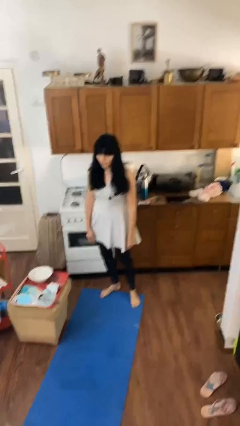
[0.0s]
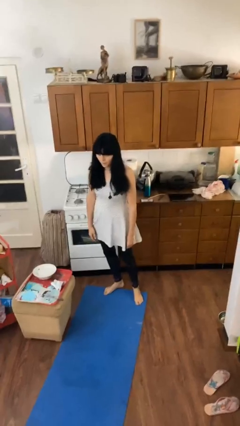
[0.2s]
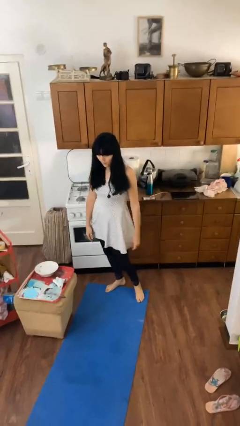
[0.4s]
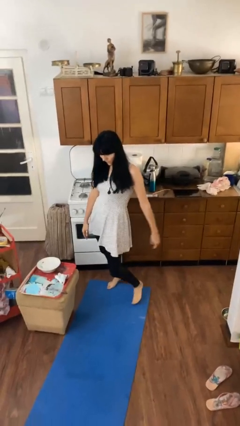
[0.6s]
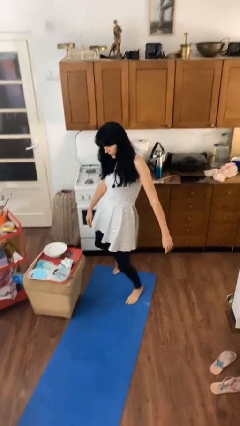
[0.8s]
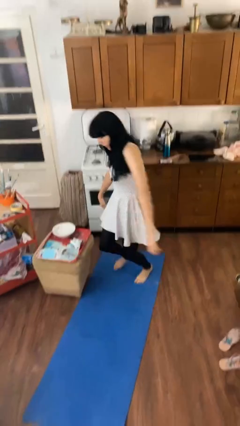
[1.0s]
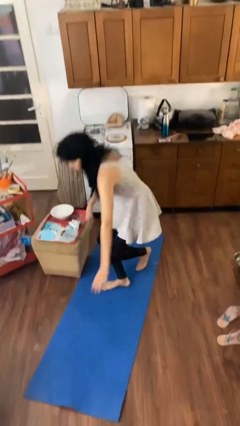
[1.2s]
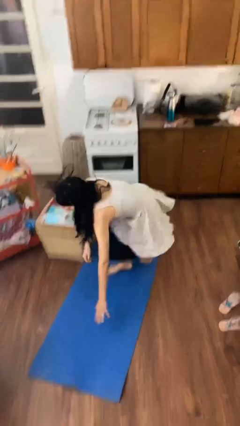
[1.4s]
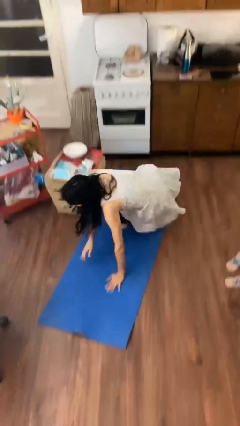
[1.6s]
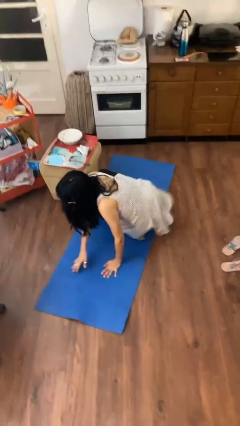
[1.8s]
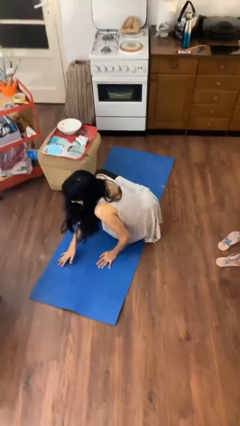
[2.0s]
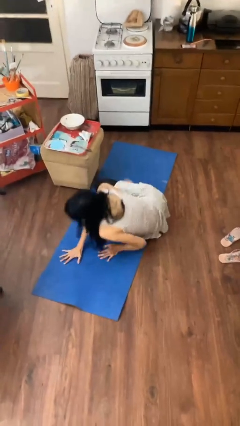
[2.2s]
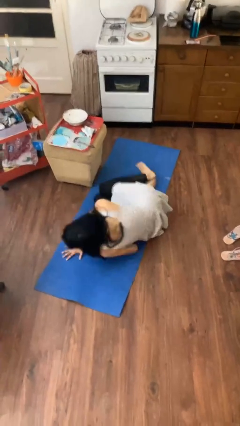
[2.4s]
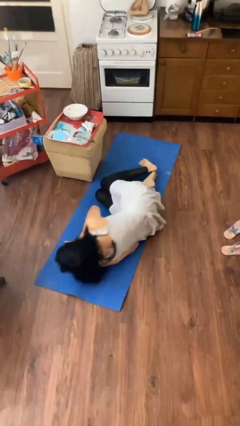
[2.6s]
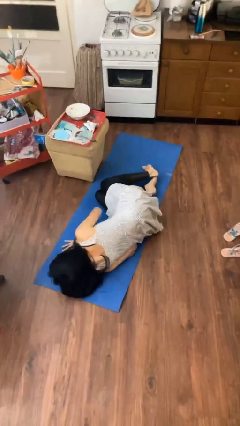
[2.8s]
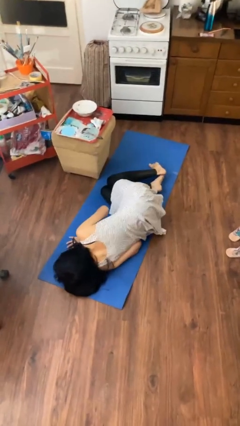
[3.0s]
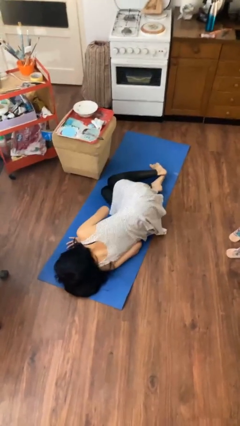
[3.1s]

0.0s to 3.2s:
person trips on object on floor

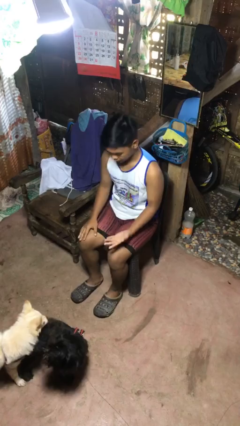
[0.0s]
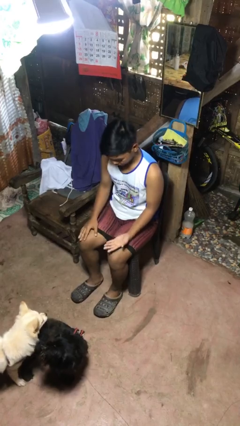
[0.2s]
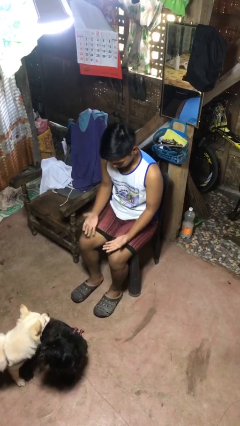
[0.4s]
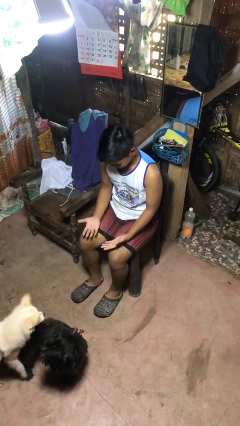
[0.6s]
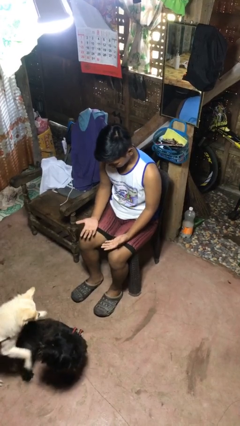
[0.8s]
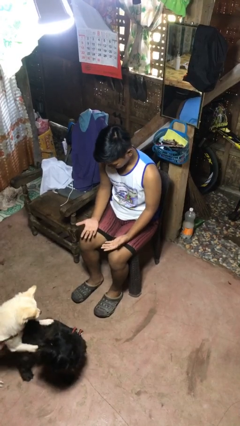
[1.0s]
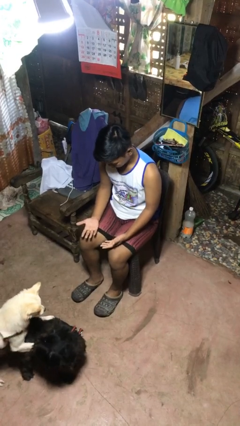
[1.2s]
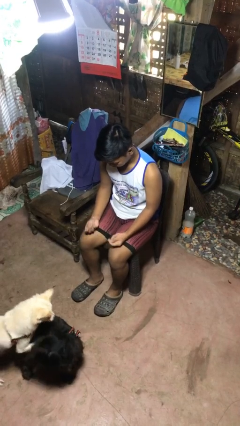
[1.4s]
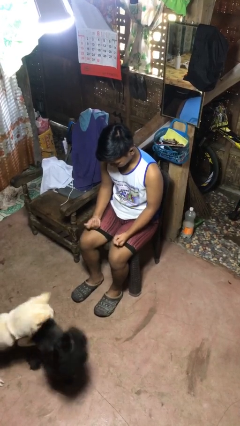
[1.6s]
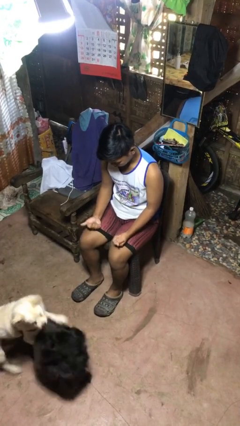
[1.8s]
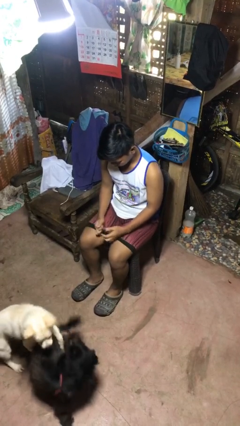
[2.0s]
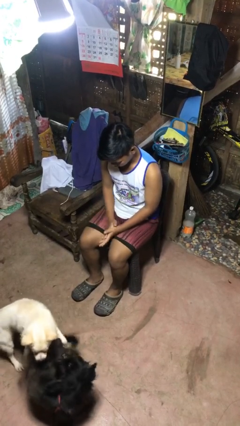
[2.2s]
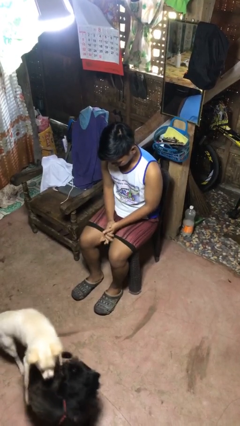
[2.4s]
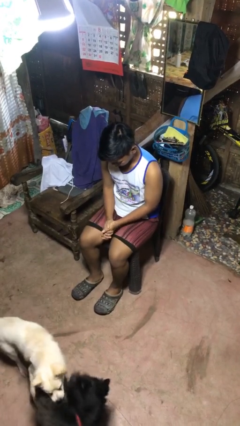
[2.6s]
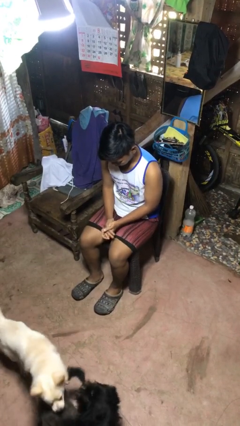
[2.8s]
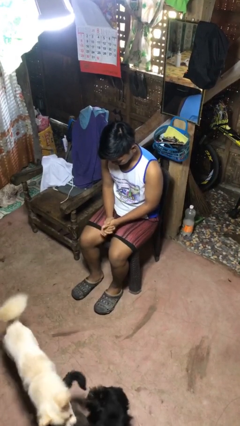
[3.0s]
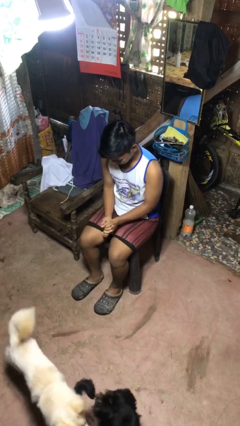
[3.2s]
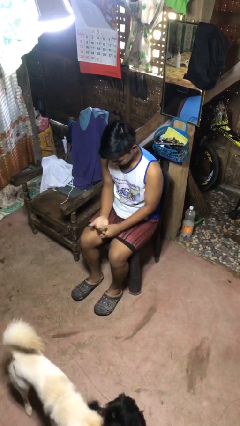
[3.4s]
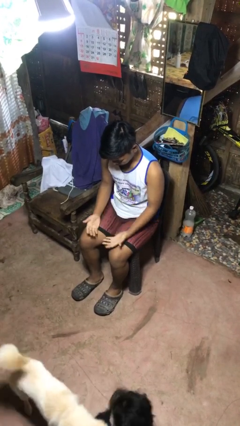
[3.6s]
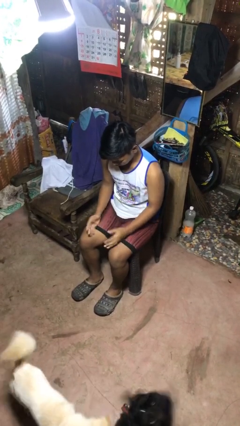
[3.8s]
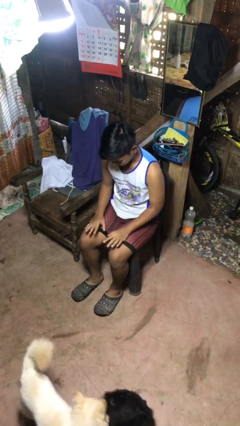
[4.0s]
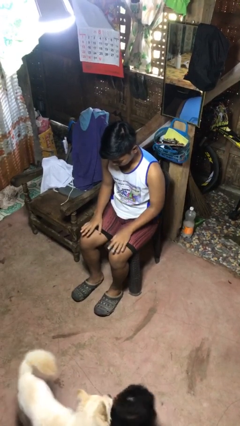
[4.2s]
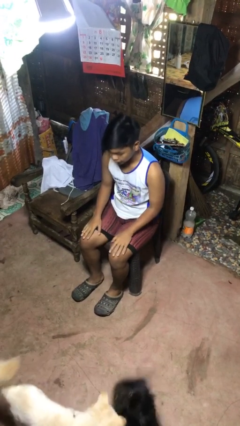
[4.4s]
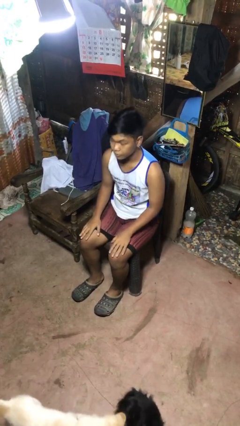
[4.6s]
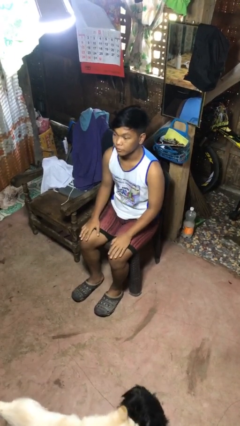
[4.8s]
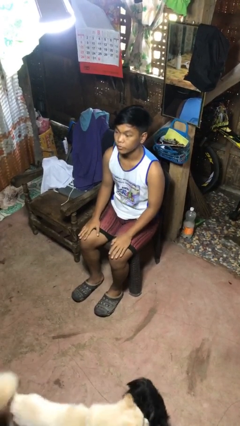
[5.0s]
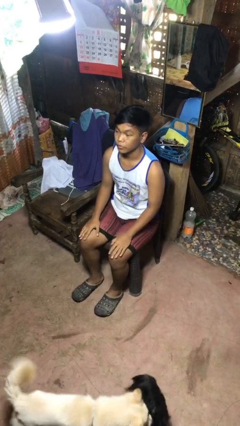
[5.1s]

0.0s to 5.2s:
person looks at hands in lap

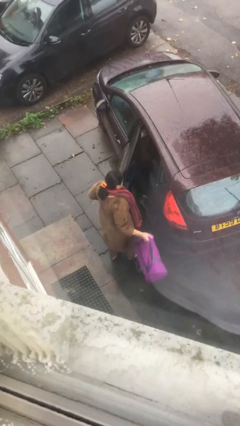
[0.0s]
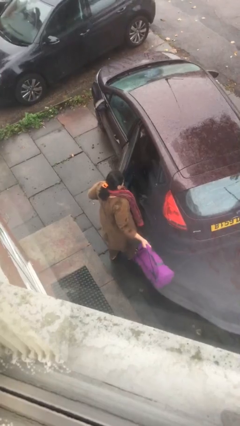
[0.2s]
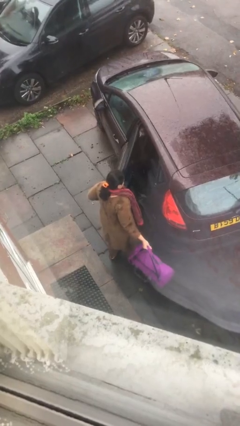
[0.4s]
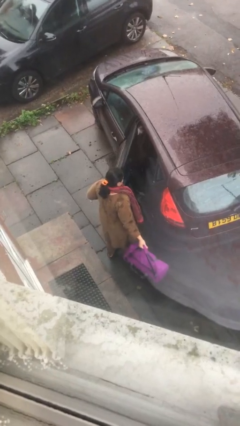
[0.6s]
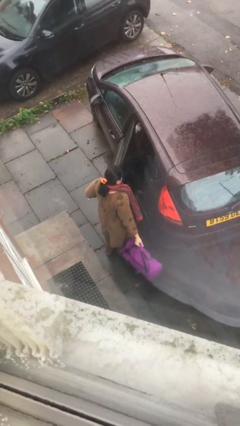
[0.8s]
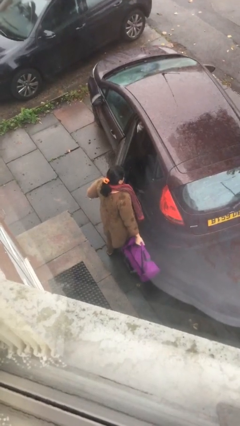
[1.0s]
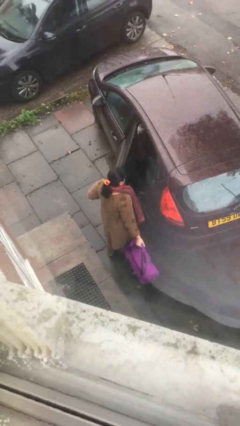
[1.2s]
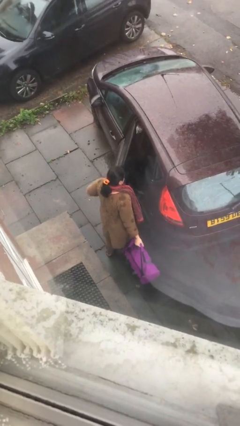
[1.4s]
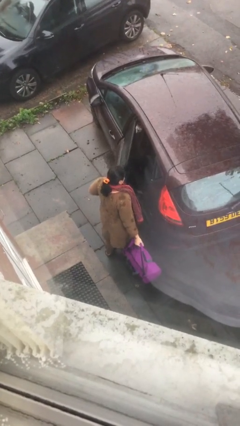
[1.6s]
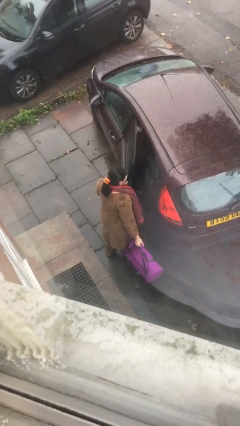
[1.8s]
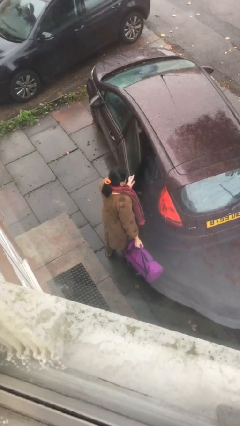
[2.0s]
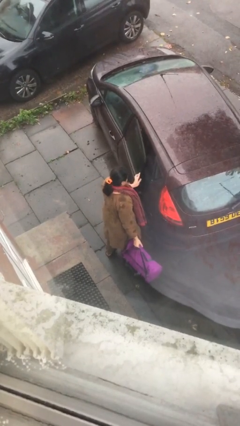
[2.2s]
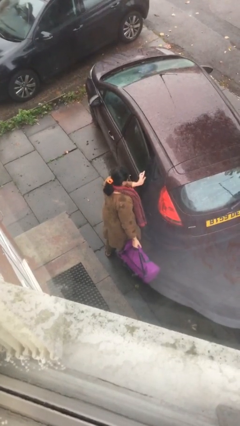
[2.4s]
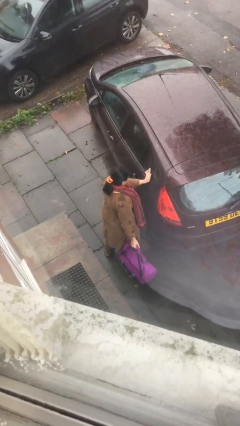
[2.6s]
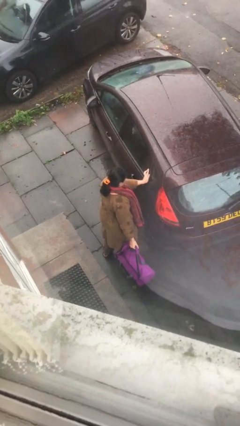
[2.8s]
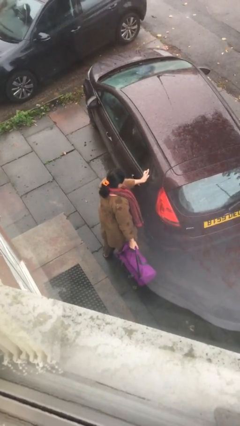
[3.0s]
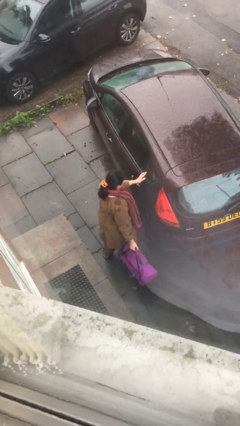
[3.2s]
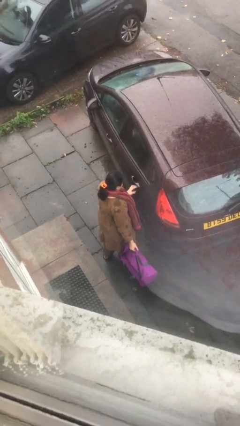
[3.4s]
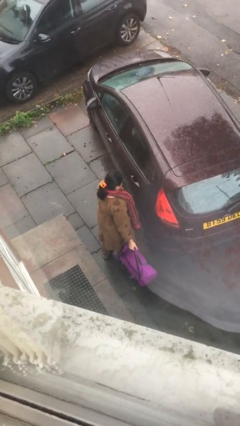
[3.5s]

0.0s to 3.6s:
person closes car door

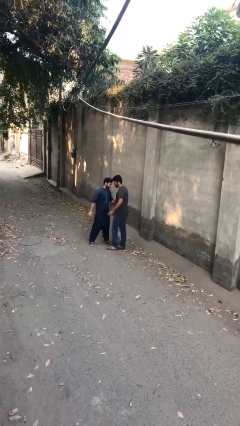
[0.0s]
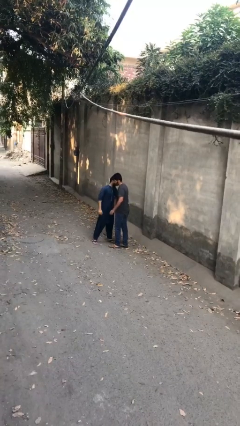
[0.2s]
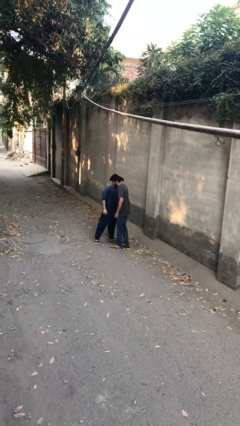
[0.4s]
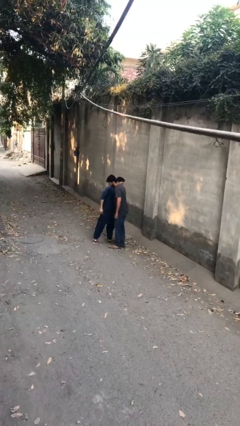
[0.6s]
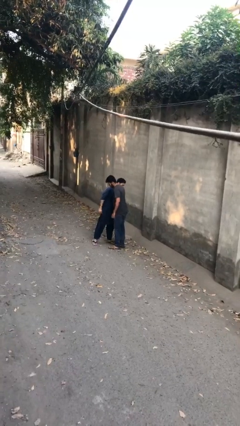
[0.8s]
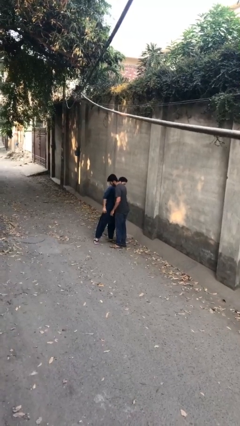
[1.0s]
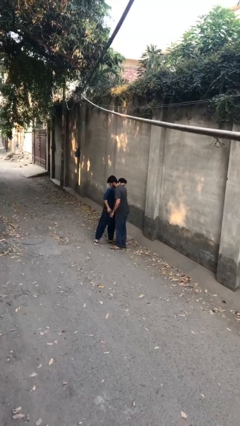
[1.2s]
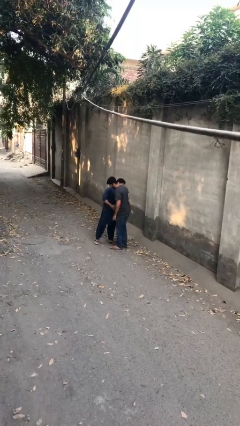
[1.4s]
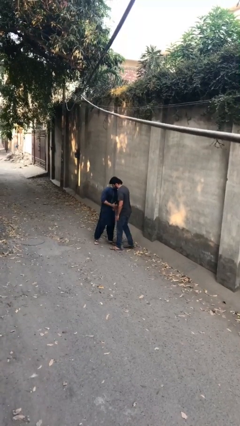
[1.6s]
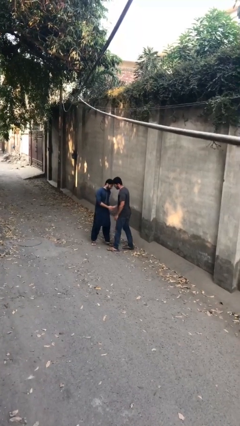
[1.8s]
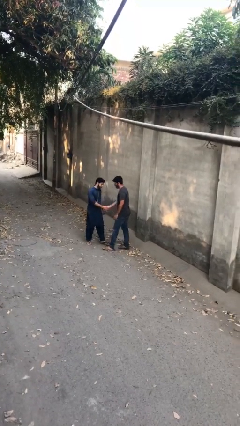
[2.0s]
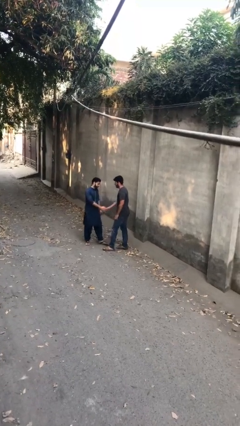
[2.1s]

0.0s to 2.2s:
person embraces person

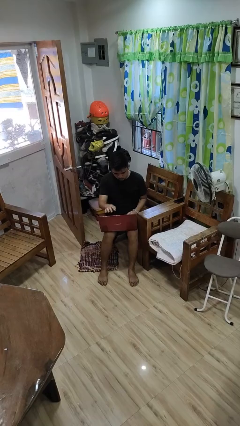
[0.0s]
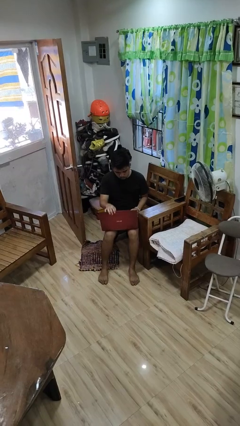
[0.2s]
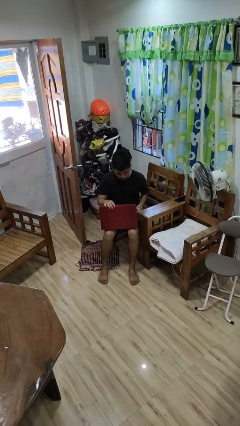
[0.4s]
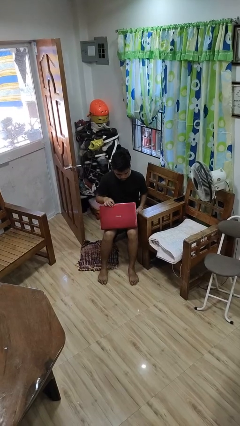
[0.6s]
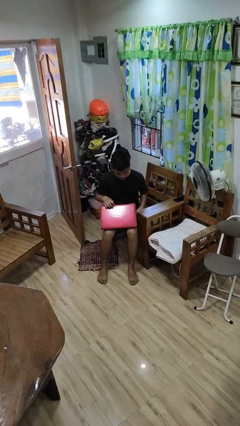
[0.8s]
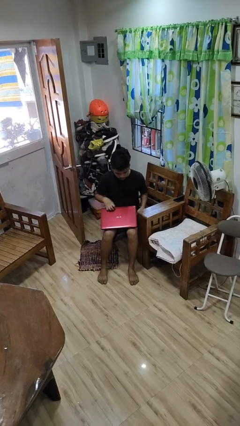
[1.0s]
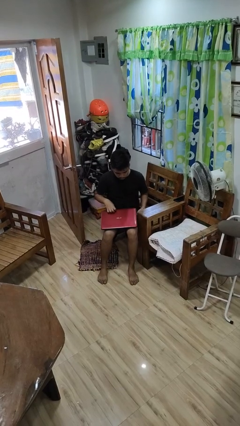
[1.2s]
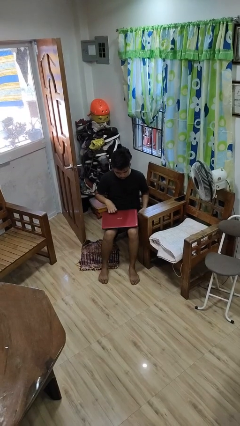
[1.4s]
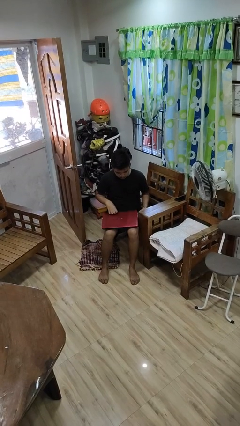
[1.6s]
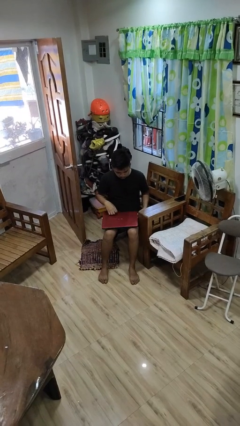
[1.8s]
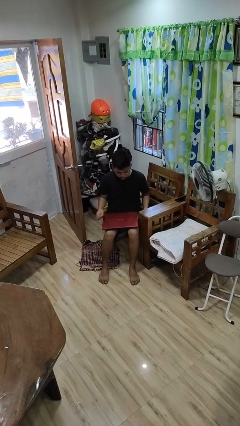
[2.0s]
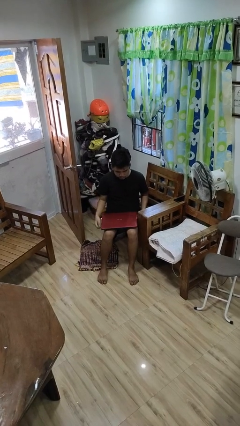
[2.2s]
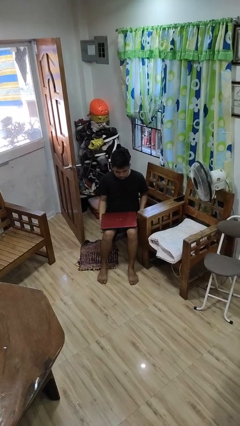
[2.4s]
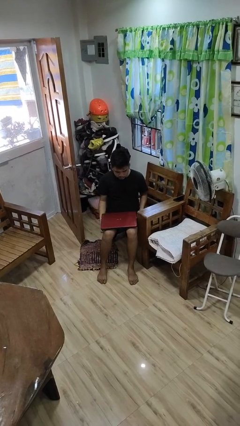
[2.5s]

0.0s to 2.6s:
person closes laptop

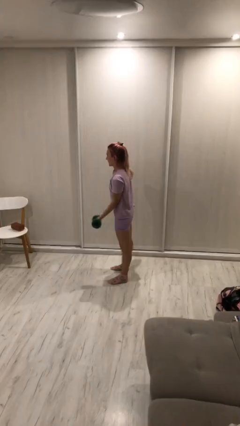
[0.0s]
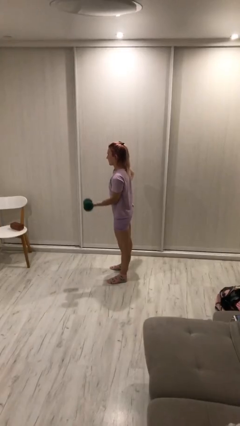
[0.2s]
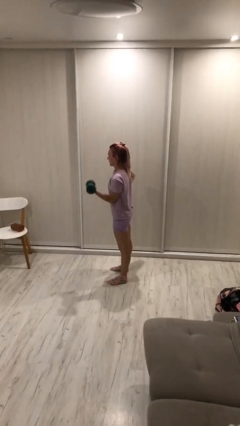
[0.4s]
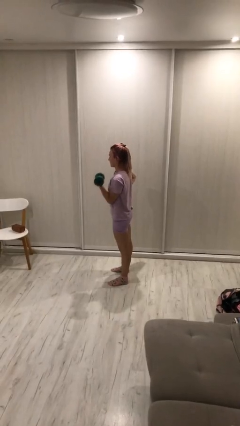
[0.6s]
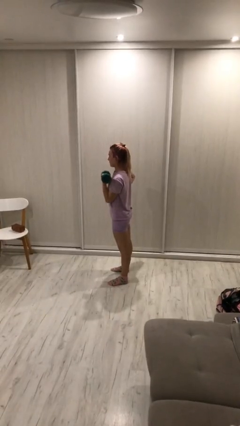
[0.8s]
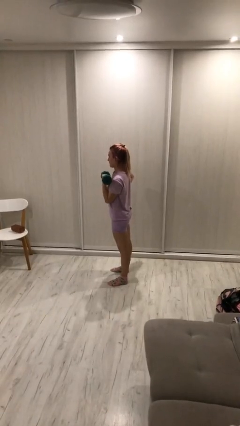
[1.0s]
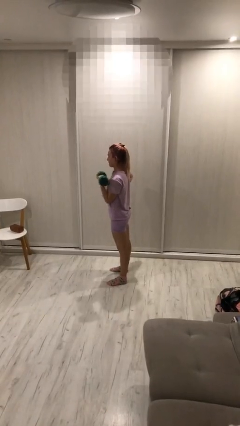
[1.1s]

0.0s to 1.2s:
person lifts dumbbells
